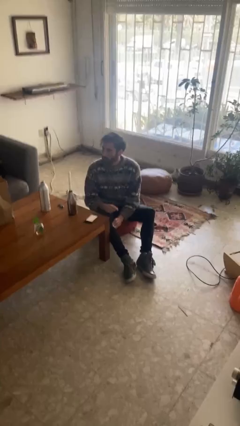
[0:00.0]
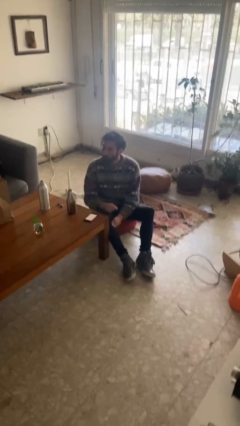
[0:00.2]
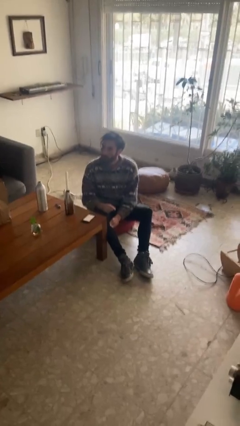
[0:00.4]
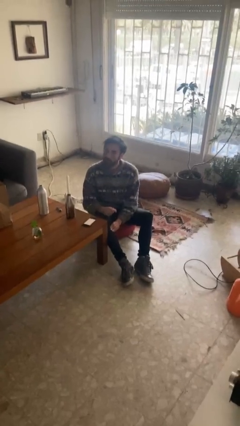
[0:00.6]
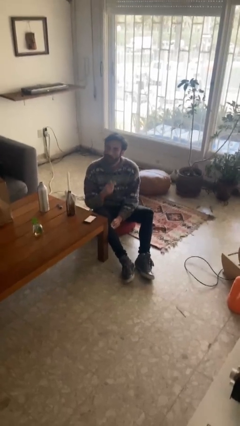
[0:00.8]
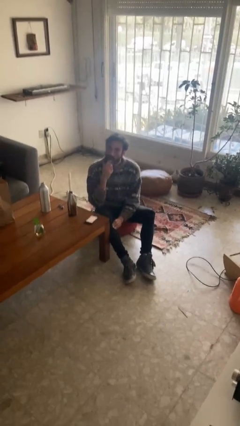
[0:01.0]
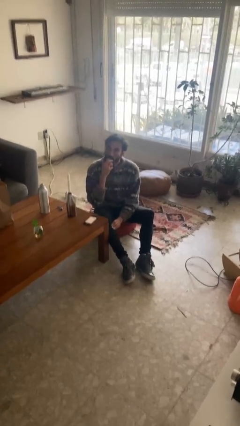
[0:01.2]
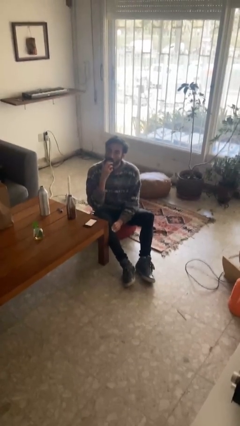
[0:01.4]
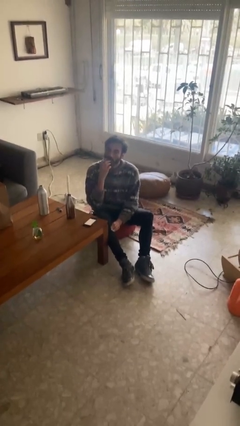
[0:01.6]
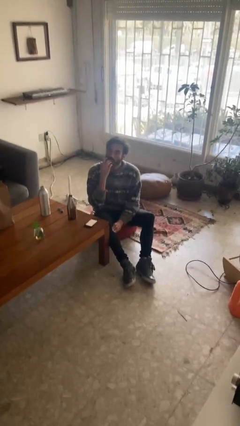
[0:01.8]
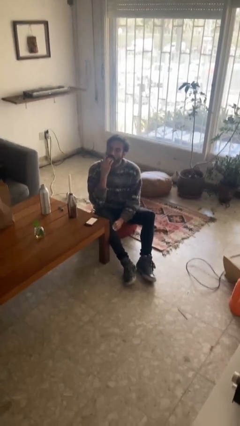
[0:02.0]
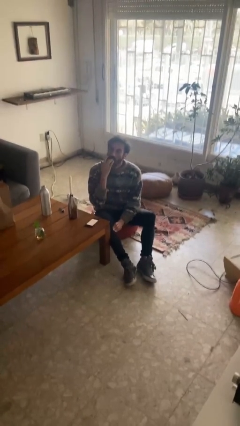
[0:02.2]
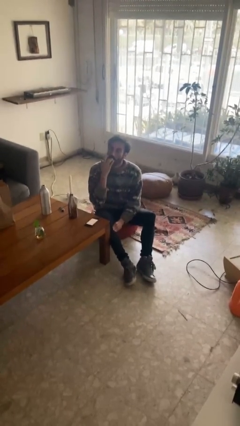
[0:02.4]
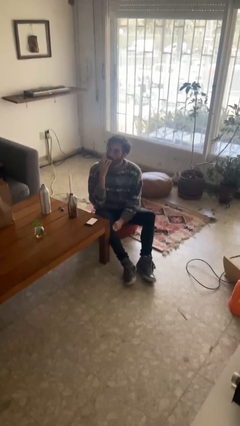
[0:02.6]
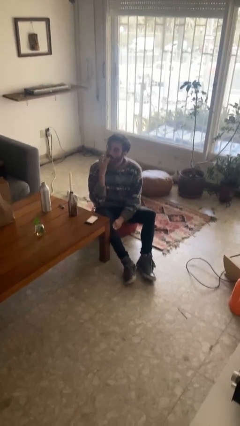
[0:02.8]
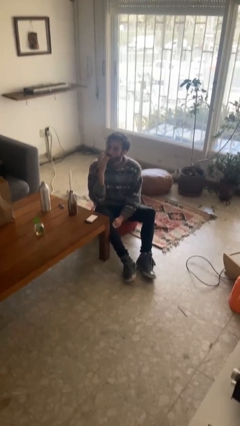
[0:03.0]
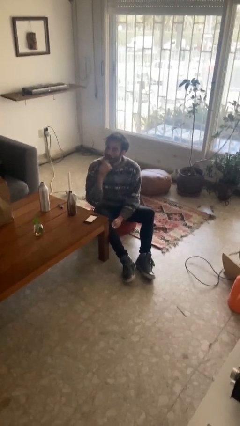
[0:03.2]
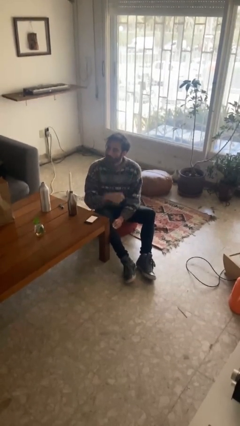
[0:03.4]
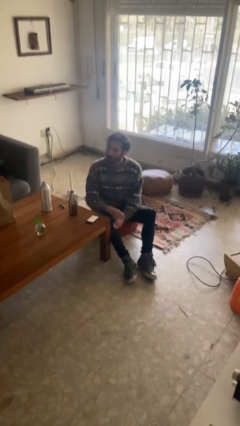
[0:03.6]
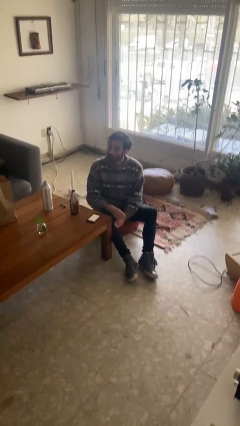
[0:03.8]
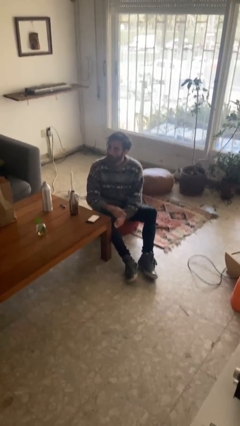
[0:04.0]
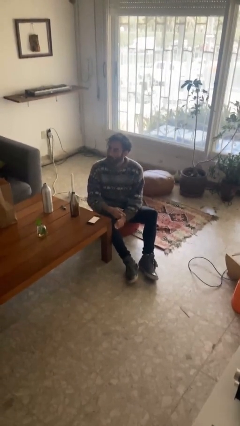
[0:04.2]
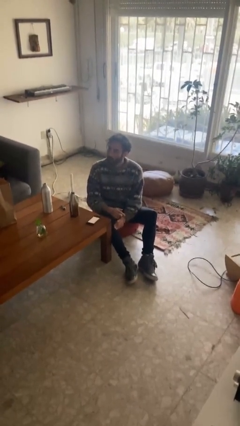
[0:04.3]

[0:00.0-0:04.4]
person licks fingers

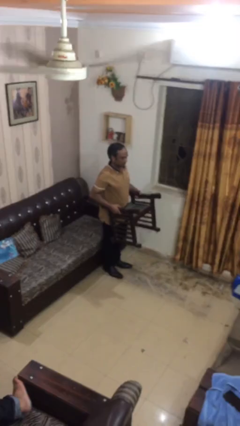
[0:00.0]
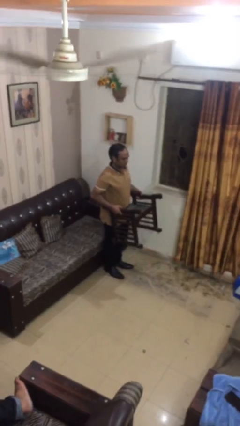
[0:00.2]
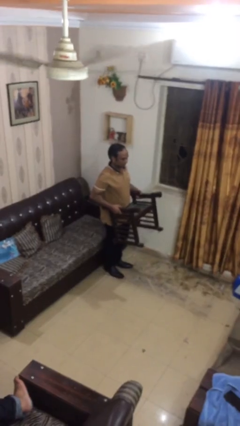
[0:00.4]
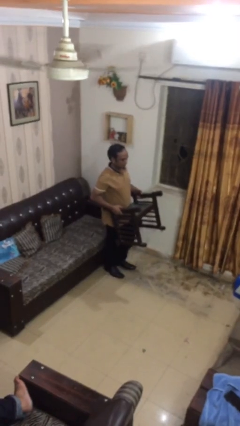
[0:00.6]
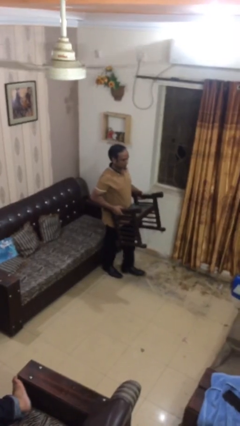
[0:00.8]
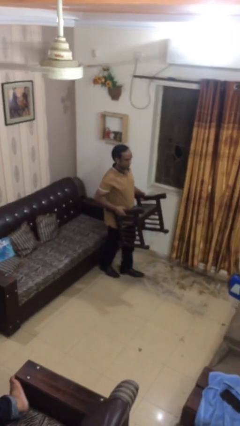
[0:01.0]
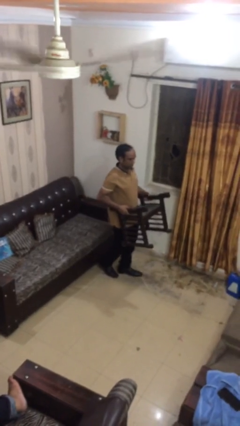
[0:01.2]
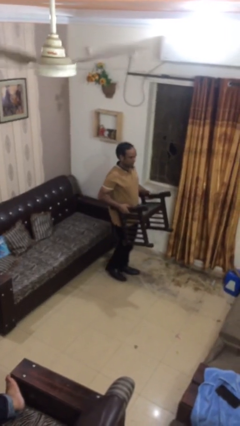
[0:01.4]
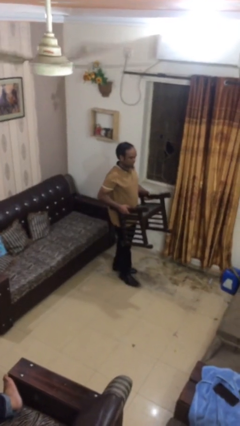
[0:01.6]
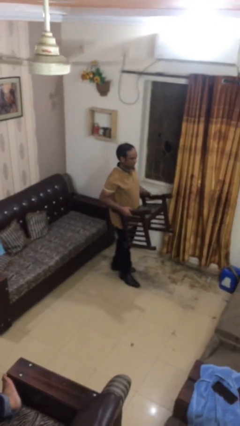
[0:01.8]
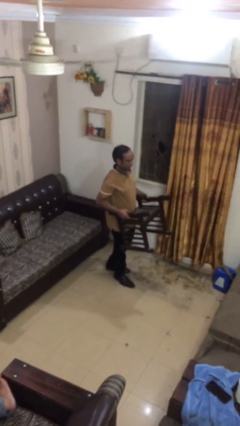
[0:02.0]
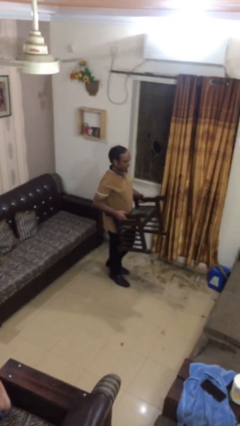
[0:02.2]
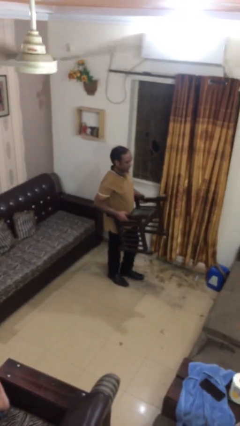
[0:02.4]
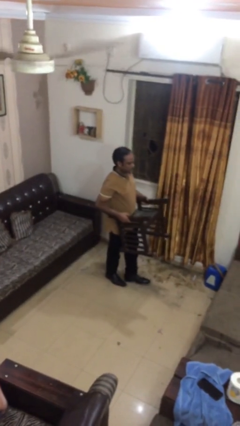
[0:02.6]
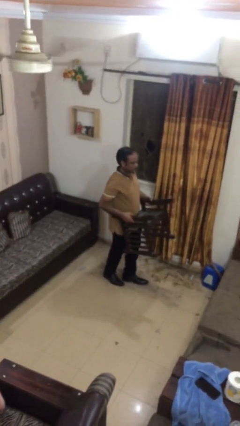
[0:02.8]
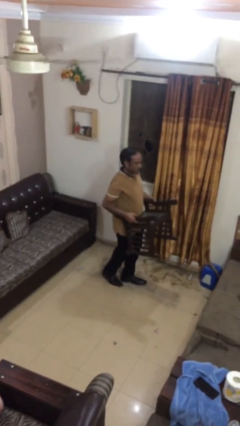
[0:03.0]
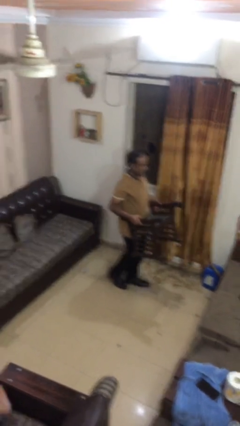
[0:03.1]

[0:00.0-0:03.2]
person carries heavy object

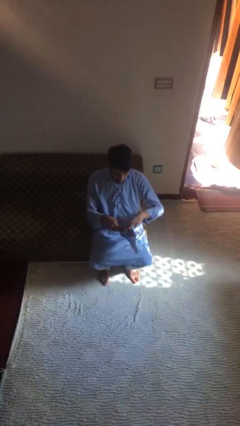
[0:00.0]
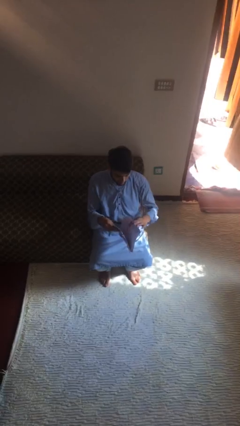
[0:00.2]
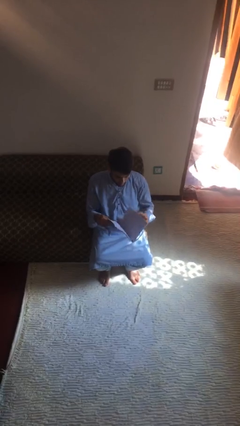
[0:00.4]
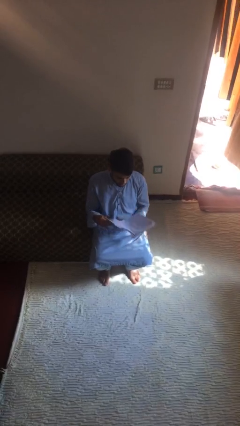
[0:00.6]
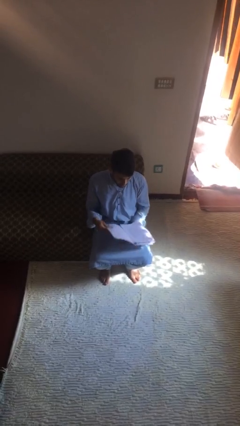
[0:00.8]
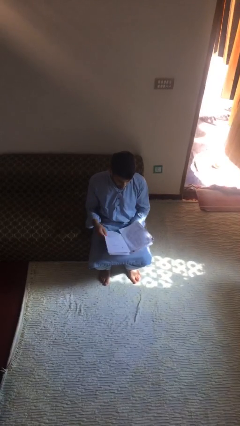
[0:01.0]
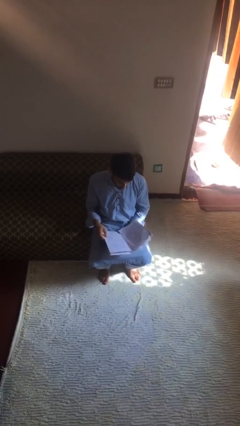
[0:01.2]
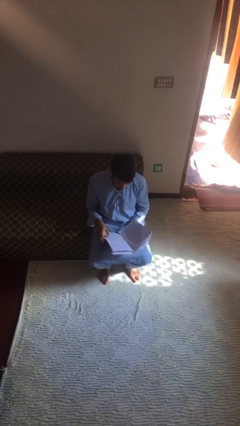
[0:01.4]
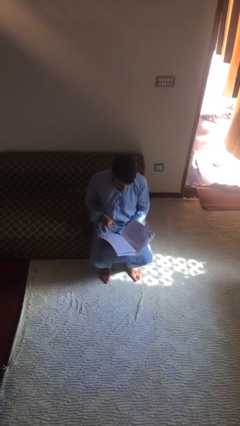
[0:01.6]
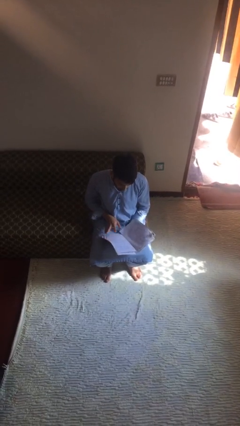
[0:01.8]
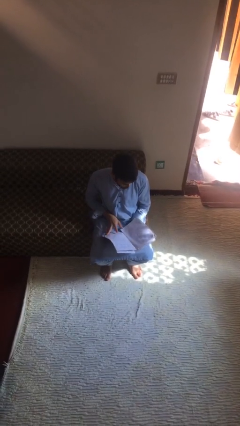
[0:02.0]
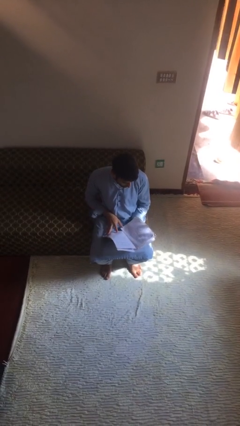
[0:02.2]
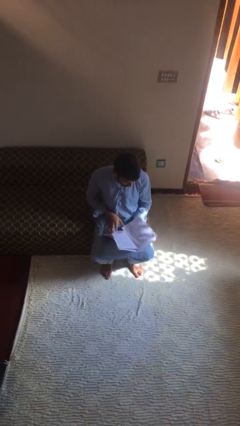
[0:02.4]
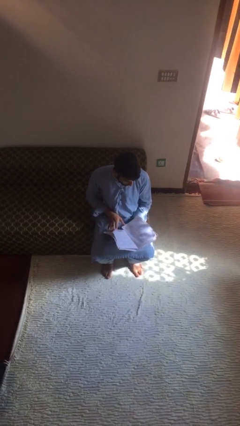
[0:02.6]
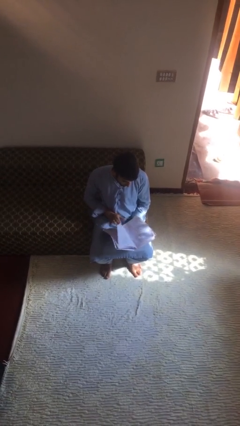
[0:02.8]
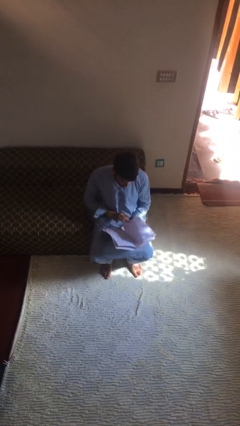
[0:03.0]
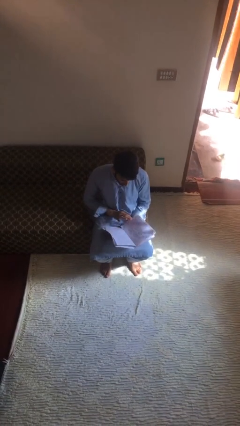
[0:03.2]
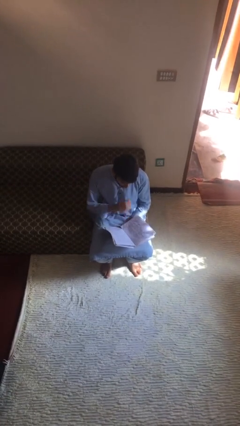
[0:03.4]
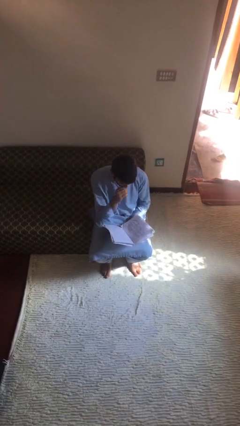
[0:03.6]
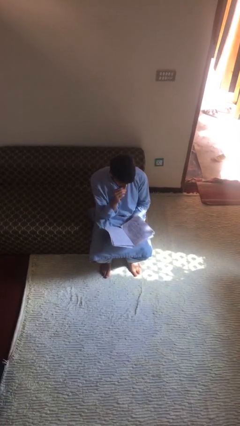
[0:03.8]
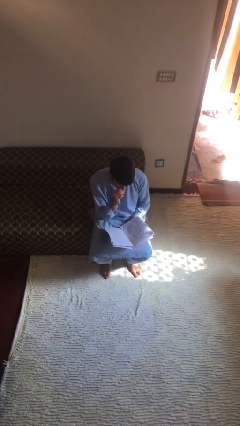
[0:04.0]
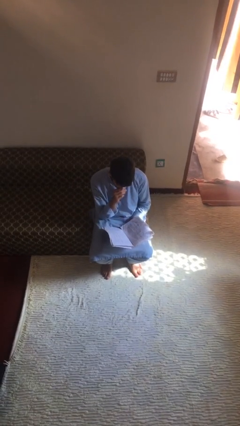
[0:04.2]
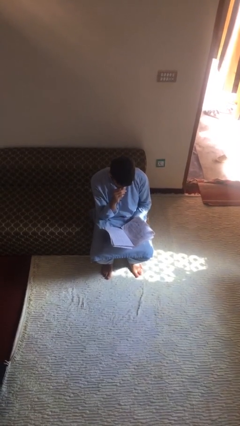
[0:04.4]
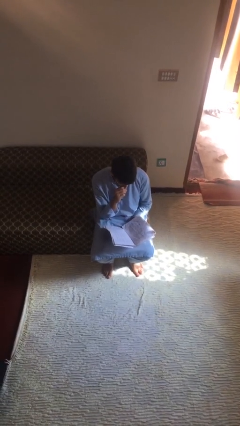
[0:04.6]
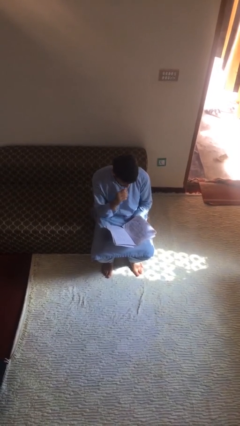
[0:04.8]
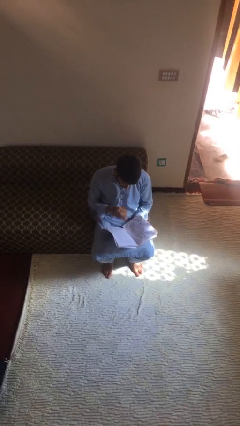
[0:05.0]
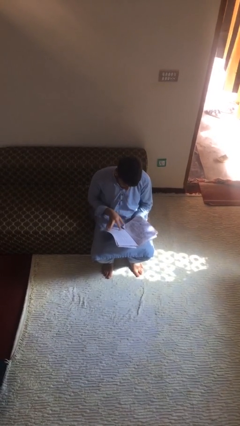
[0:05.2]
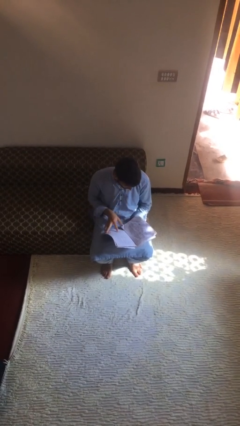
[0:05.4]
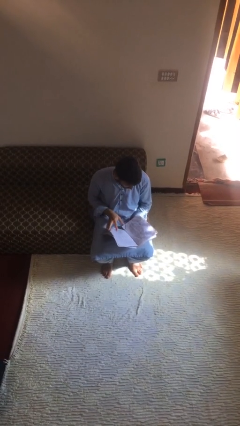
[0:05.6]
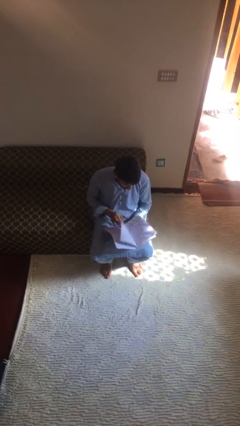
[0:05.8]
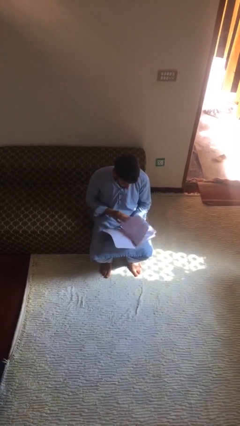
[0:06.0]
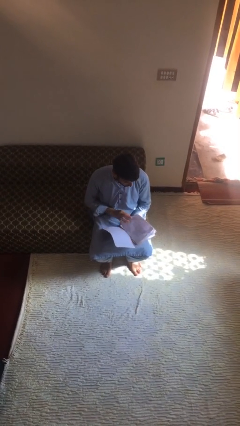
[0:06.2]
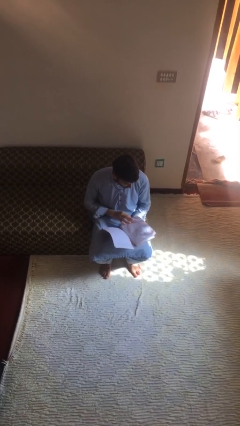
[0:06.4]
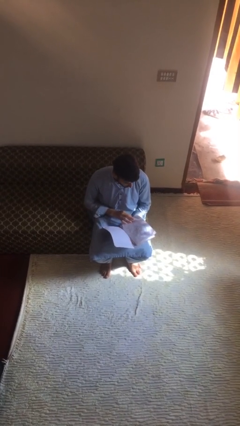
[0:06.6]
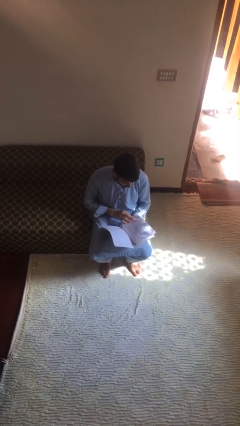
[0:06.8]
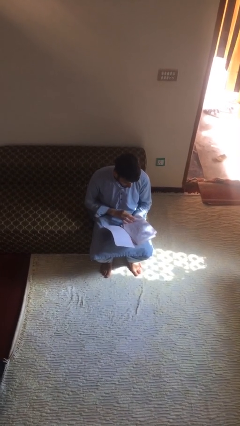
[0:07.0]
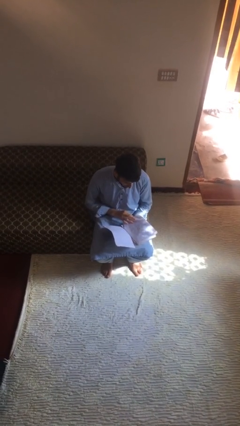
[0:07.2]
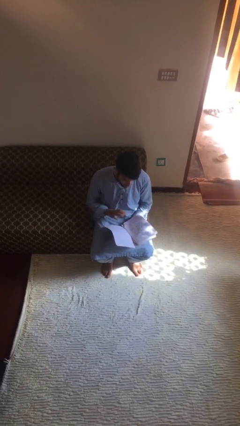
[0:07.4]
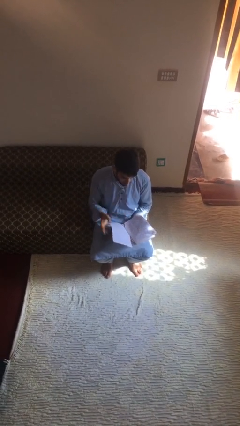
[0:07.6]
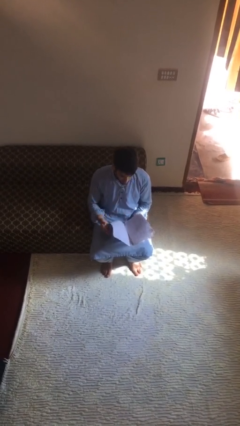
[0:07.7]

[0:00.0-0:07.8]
person reads document

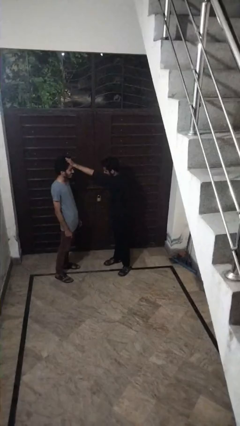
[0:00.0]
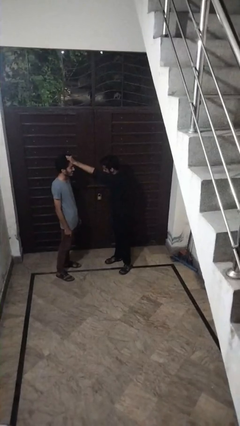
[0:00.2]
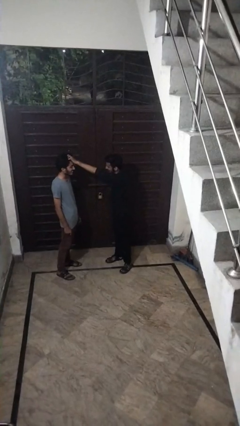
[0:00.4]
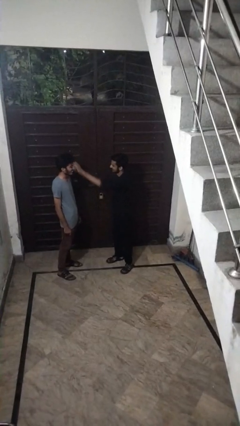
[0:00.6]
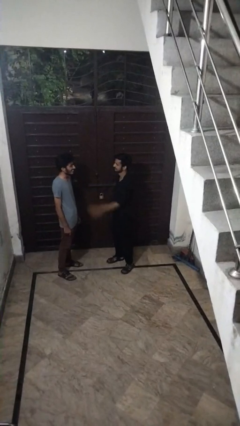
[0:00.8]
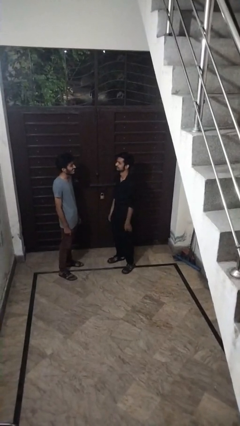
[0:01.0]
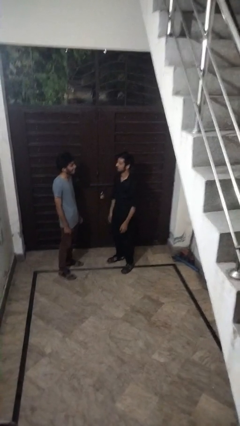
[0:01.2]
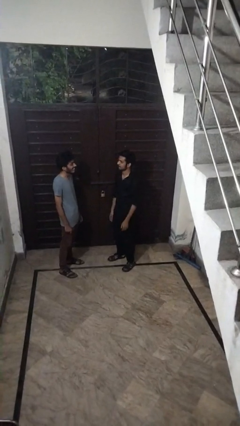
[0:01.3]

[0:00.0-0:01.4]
person grabs person by hair

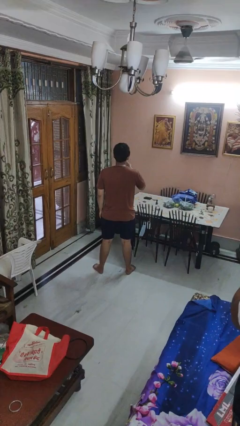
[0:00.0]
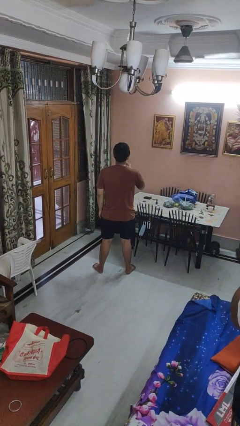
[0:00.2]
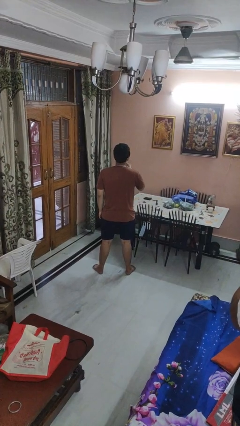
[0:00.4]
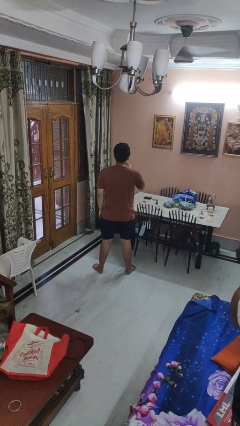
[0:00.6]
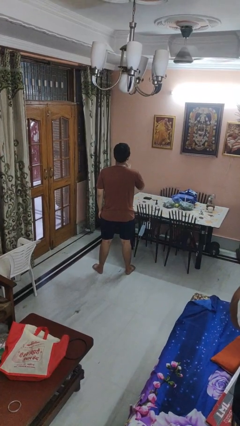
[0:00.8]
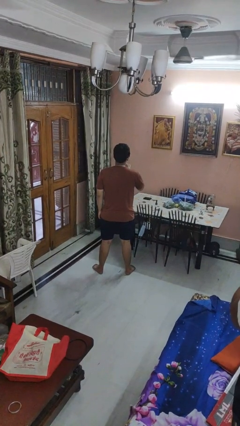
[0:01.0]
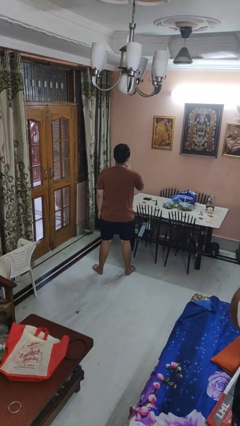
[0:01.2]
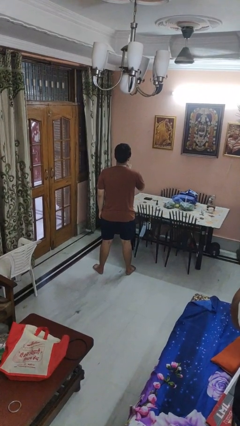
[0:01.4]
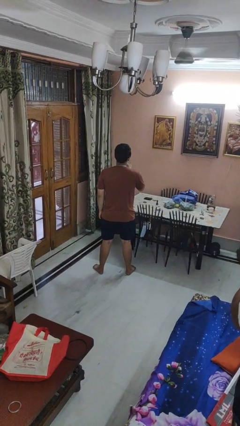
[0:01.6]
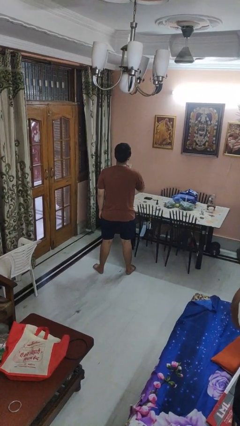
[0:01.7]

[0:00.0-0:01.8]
person strokes chin
